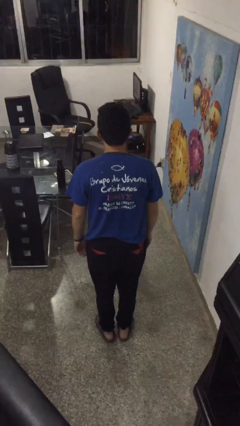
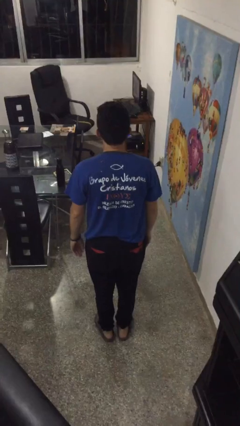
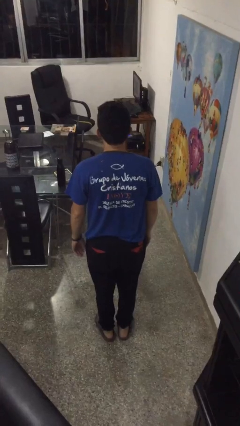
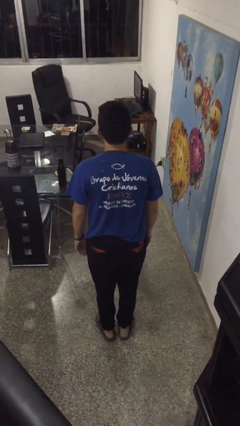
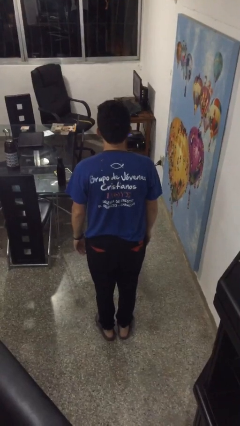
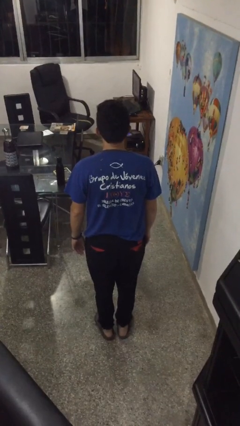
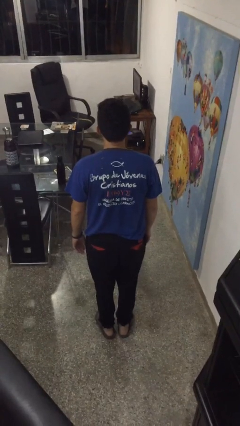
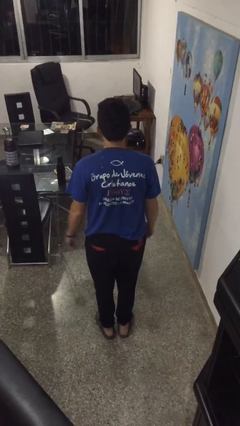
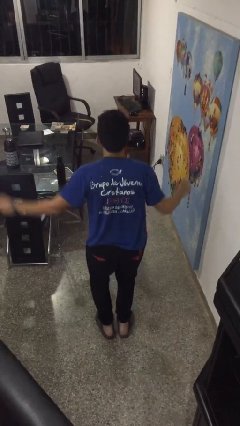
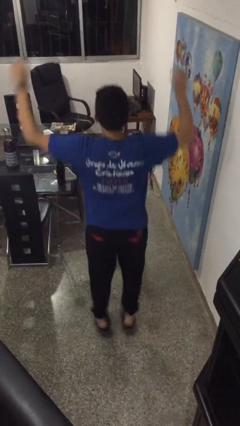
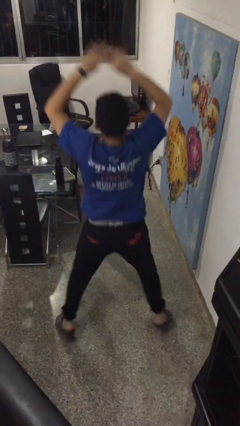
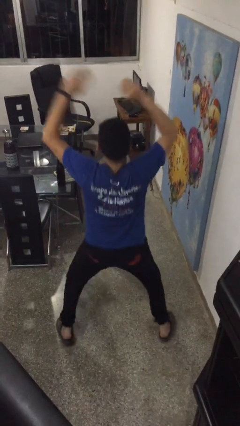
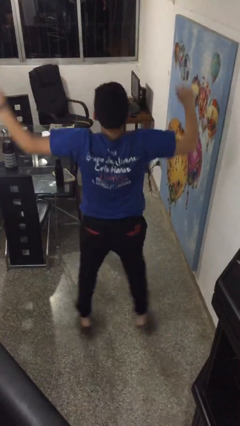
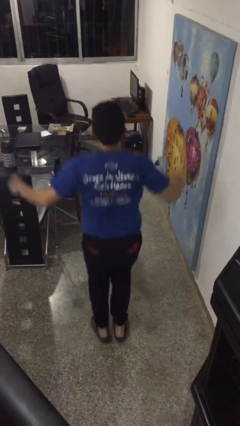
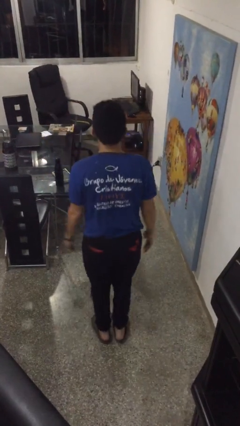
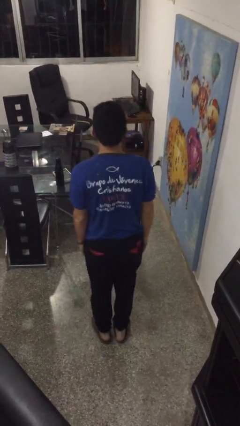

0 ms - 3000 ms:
person exercises with jumping jacks

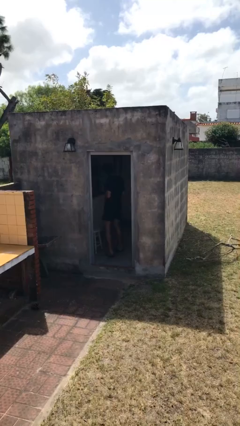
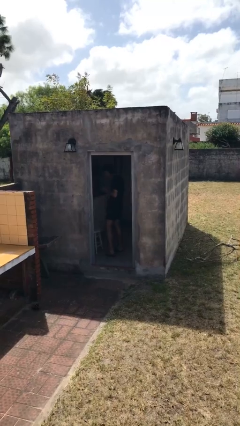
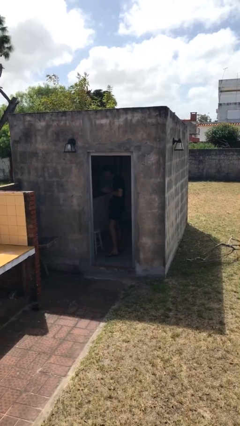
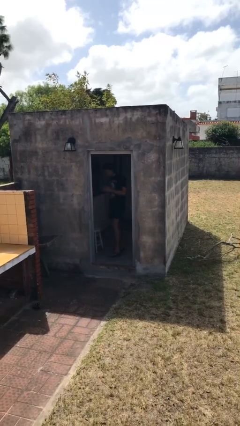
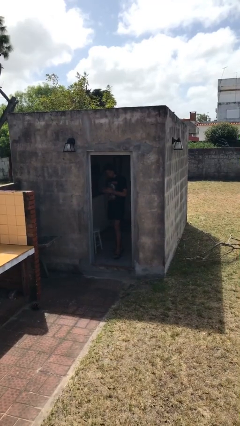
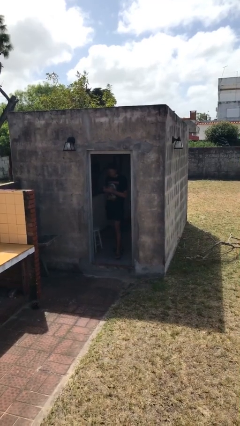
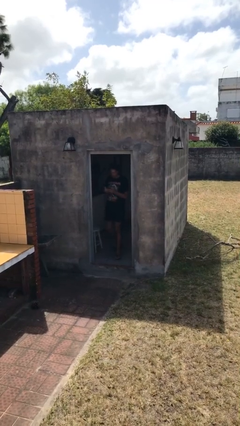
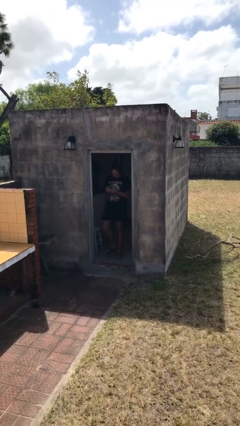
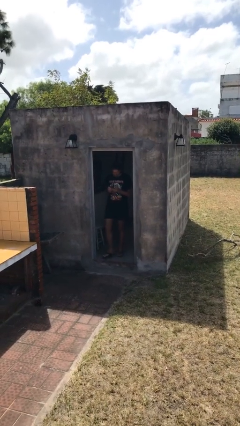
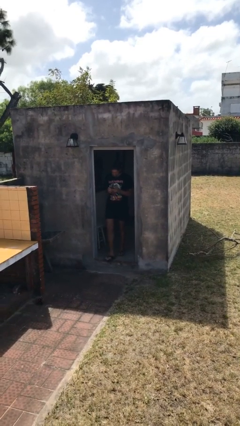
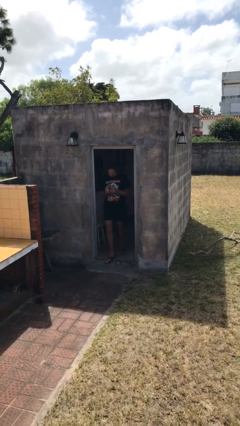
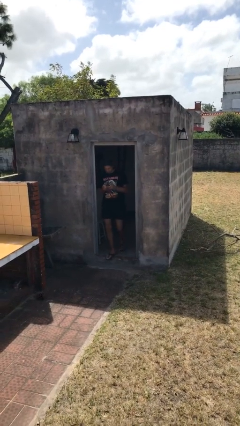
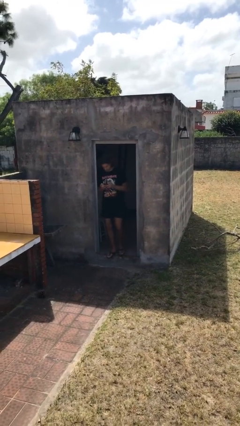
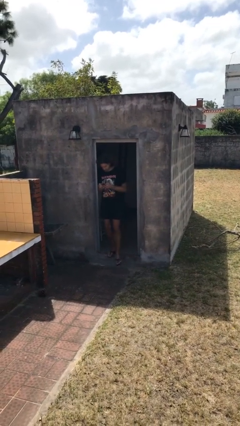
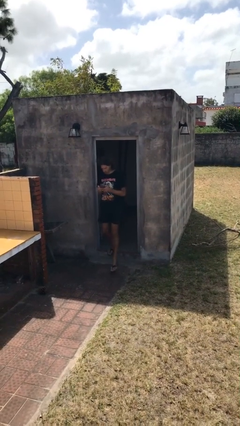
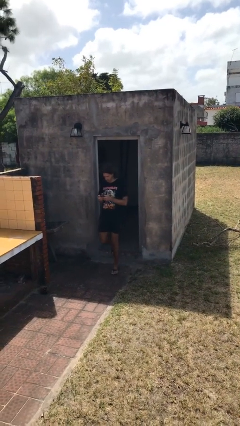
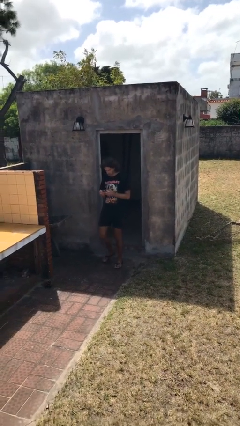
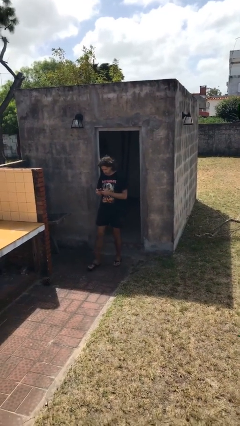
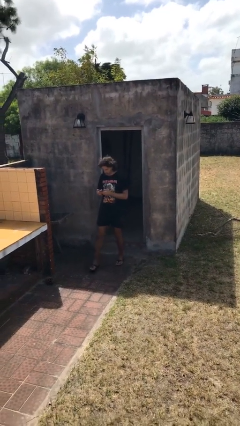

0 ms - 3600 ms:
person enters scene through structure

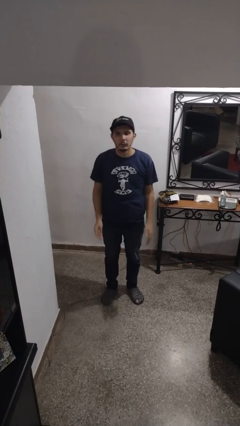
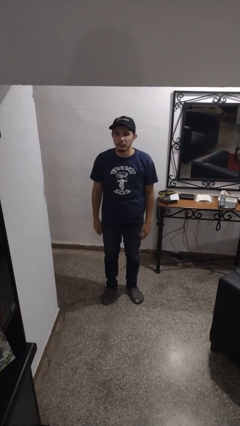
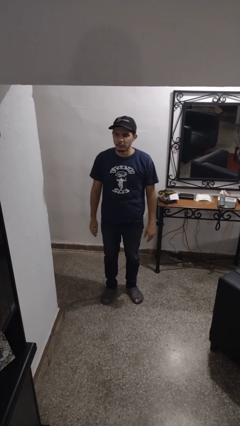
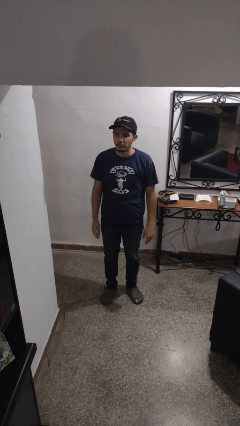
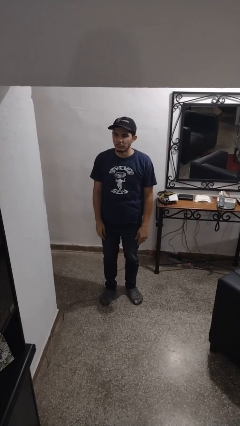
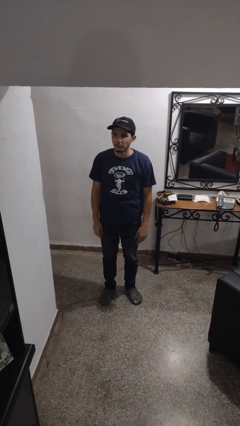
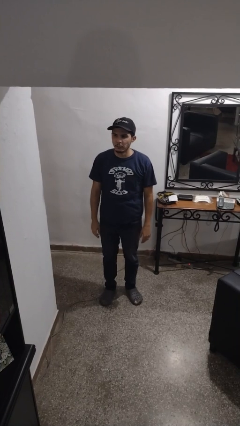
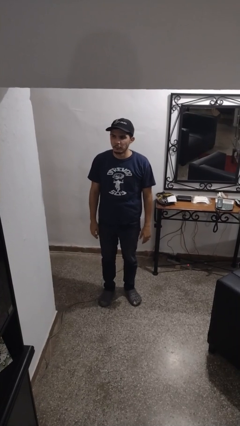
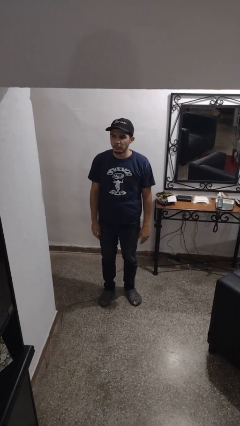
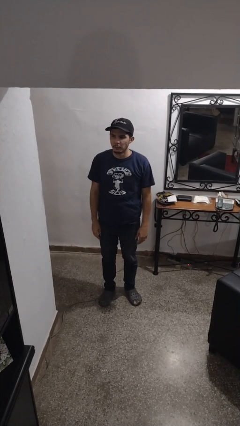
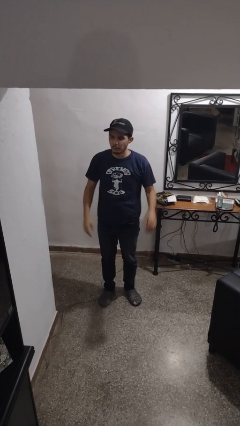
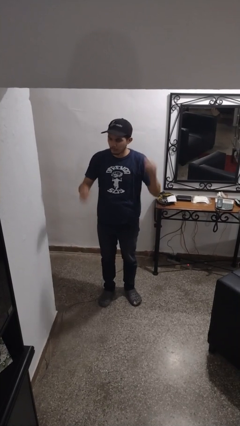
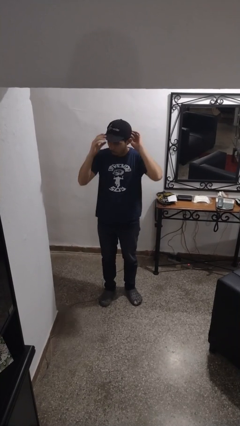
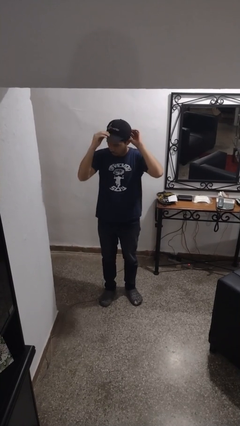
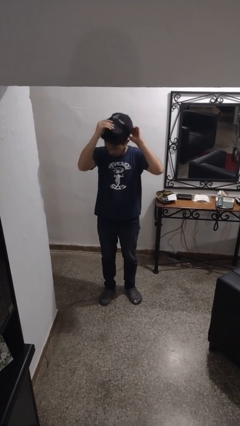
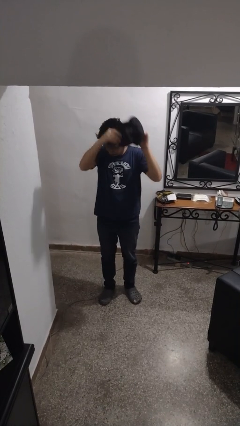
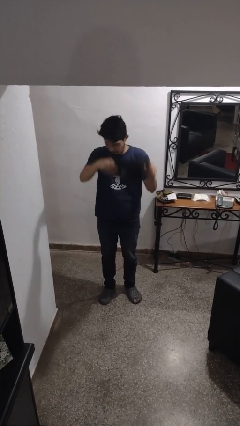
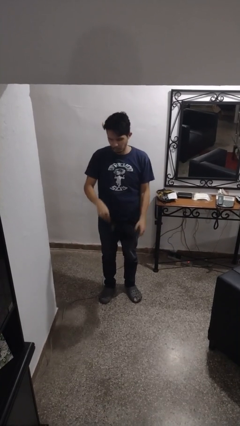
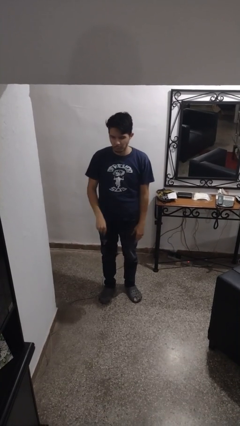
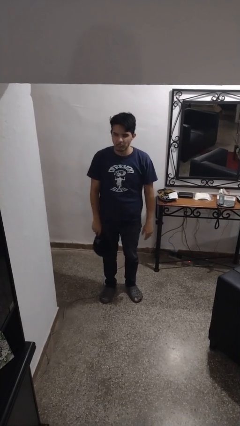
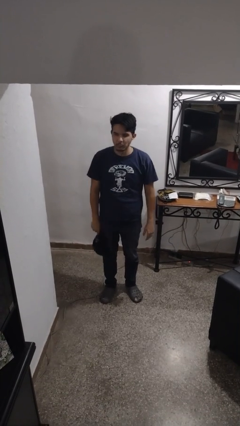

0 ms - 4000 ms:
person takes off hat

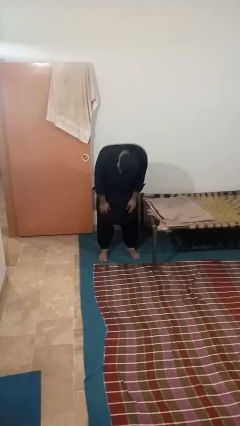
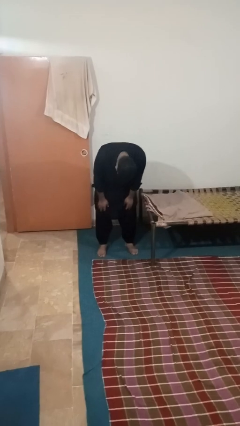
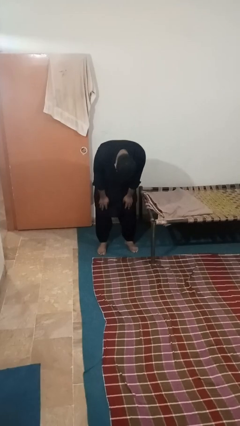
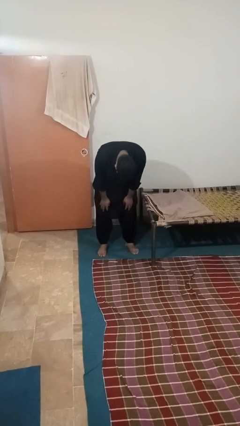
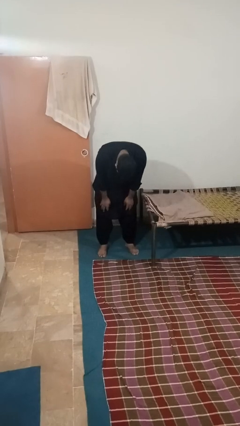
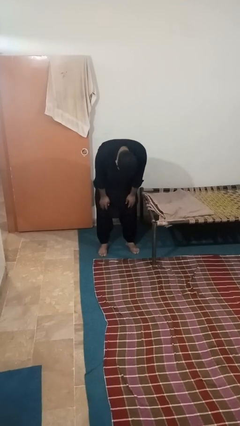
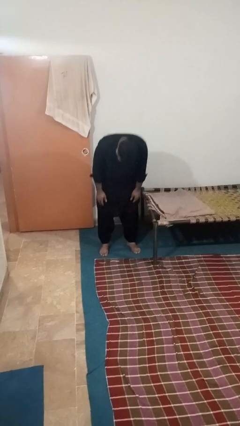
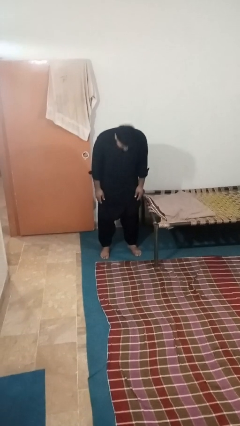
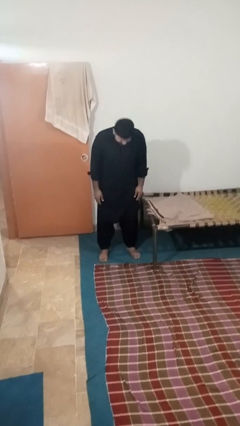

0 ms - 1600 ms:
person bows

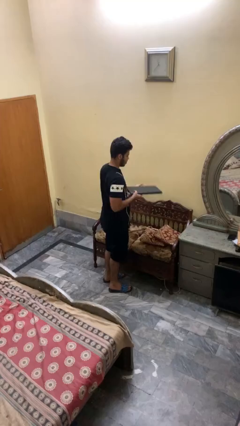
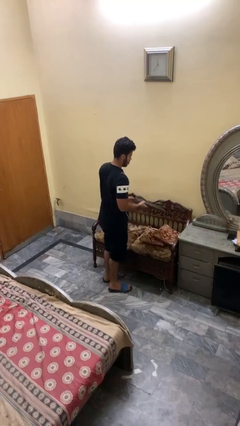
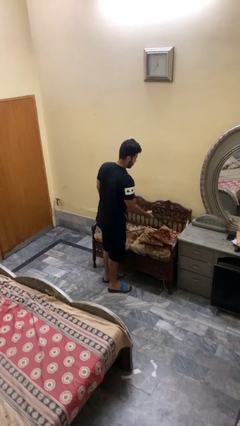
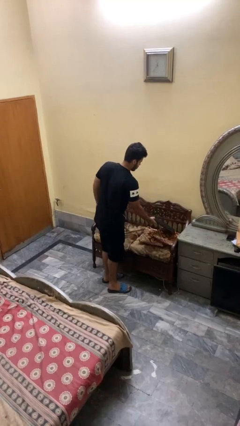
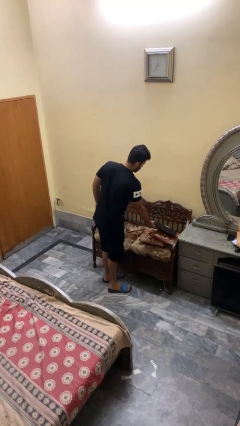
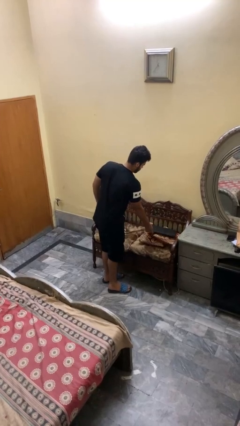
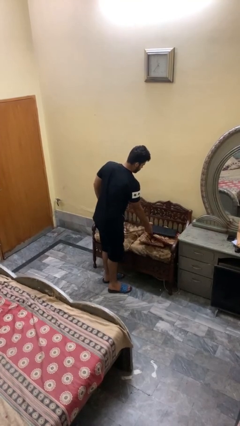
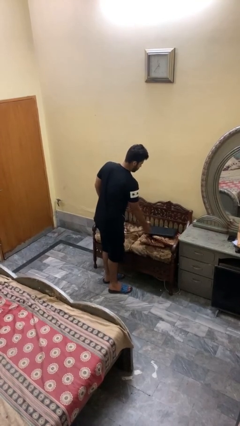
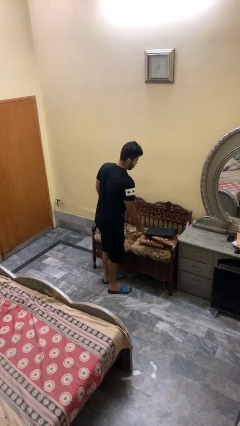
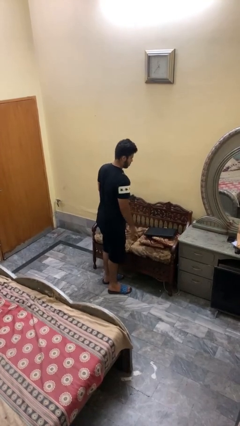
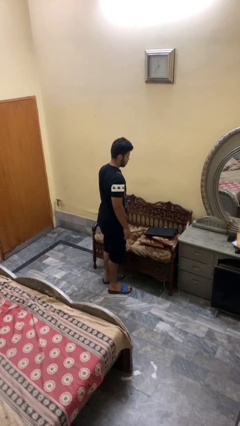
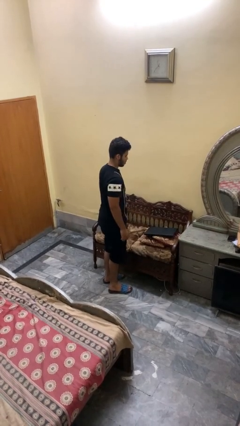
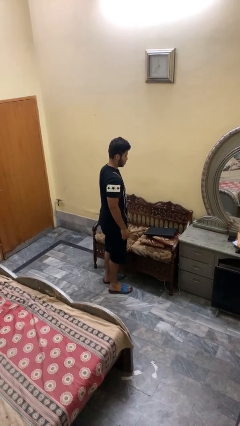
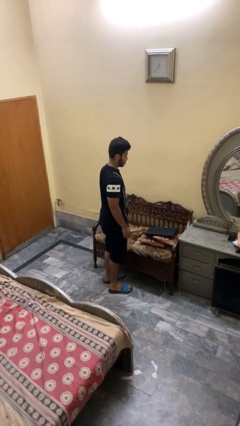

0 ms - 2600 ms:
person puts down object on couch

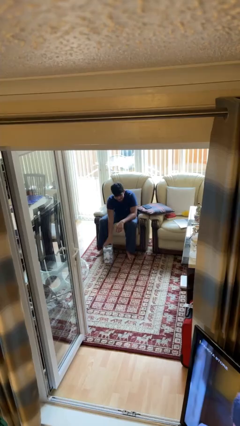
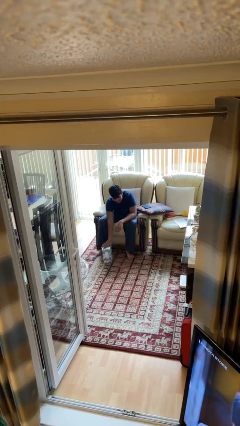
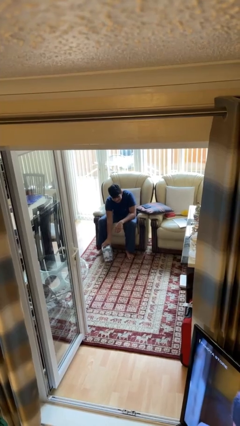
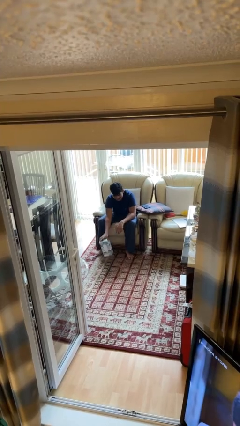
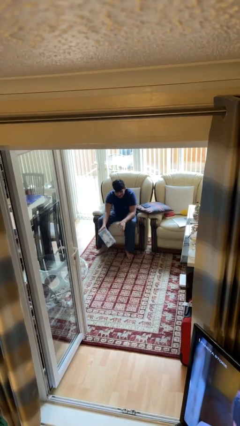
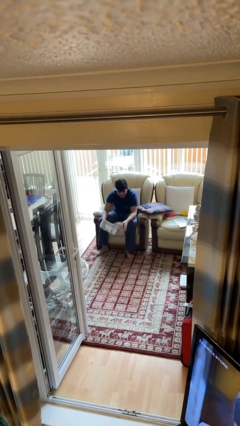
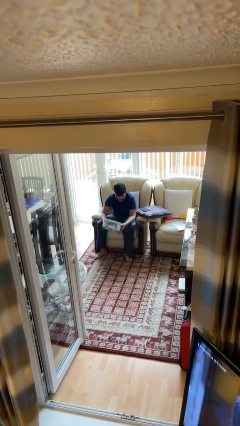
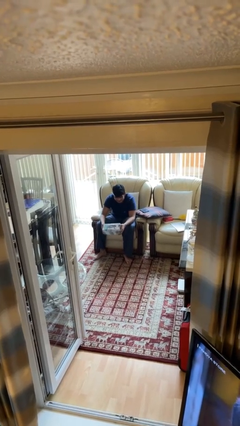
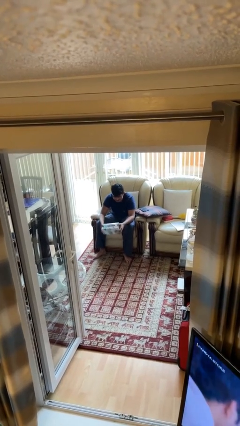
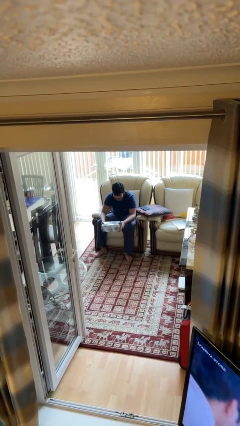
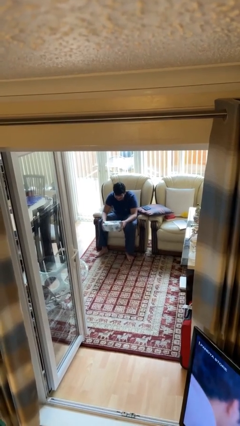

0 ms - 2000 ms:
person picks up object from floor

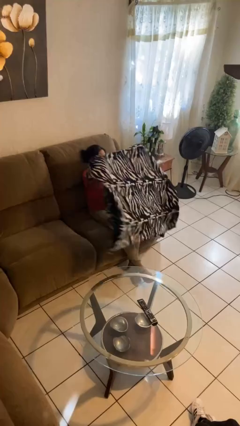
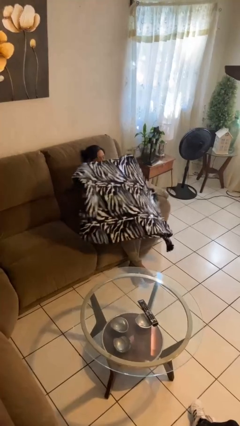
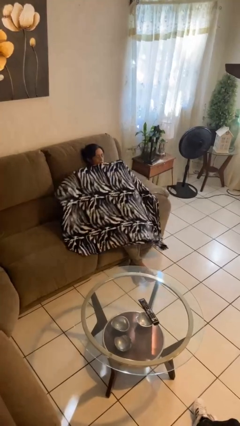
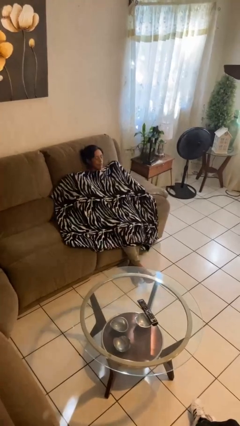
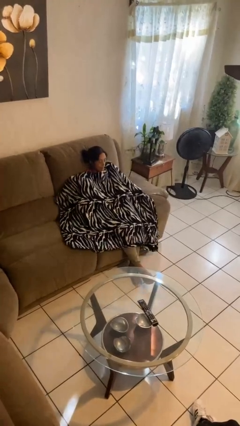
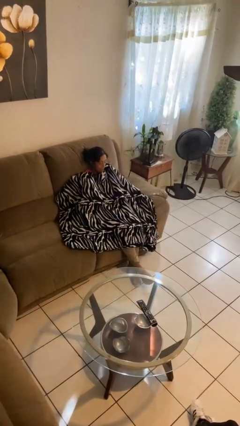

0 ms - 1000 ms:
person covers with blanket
